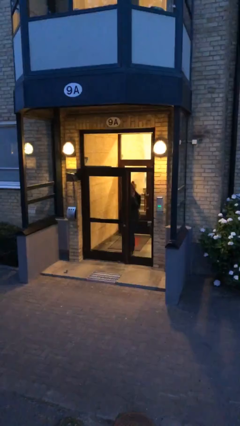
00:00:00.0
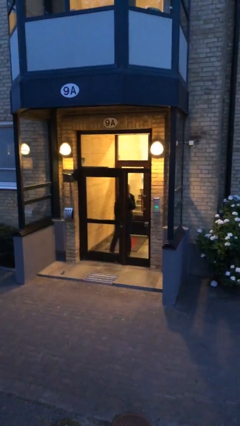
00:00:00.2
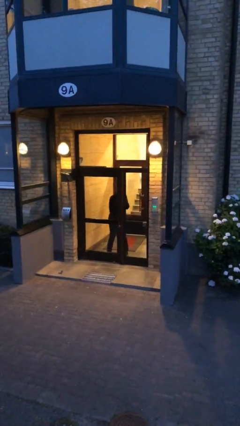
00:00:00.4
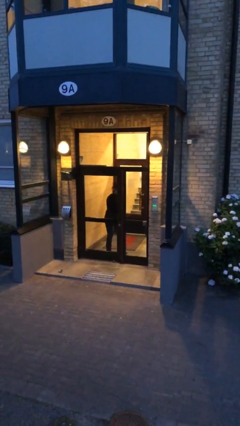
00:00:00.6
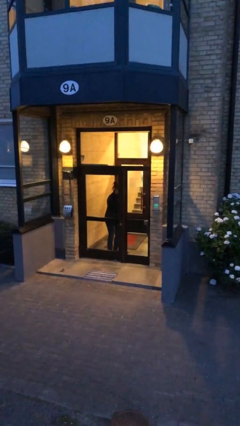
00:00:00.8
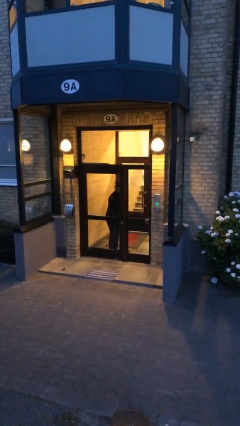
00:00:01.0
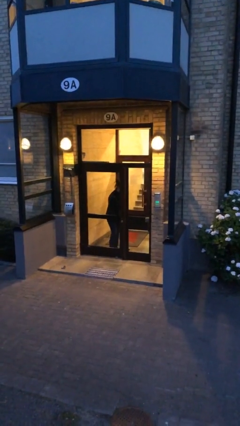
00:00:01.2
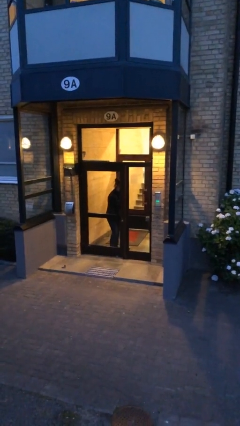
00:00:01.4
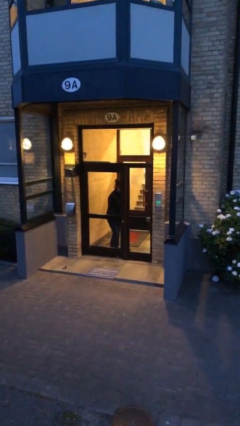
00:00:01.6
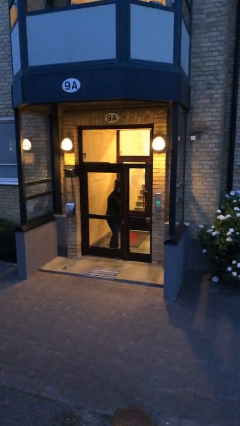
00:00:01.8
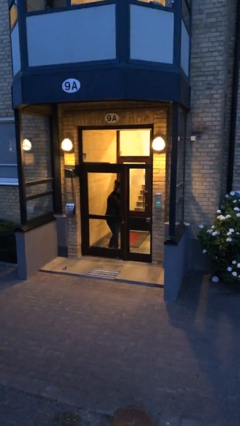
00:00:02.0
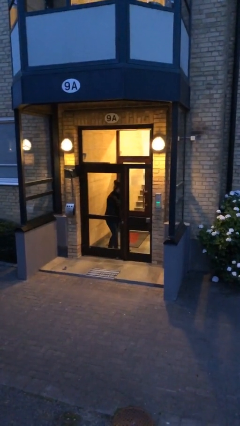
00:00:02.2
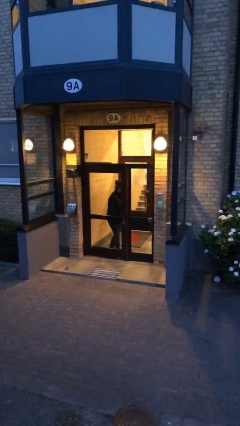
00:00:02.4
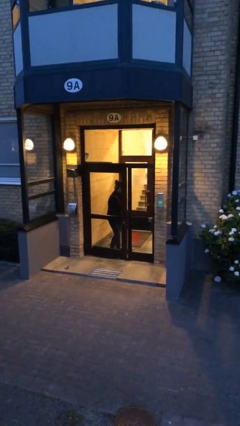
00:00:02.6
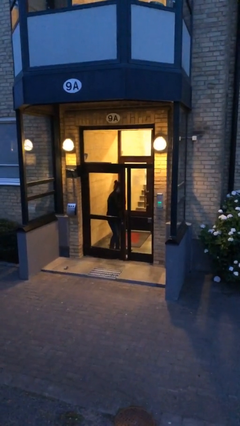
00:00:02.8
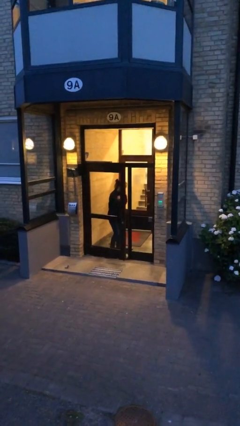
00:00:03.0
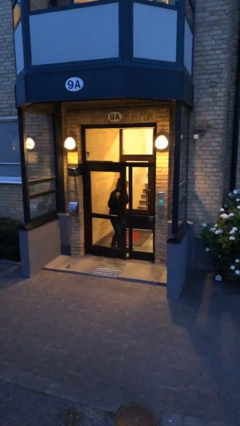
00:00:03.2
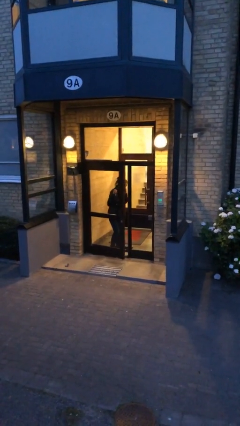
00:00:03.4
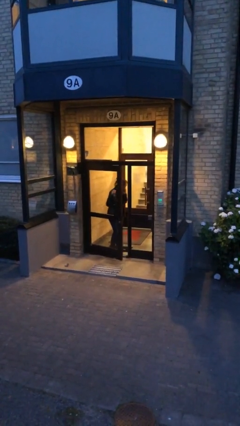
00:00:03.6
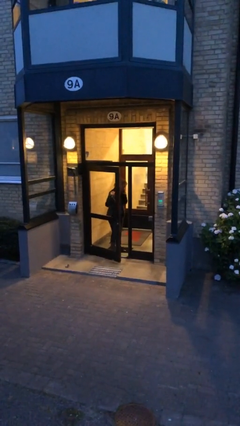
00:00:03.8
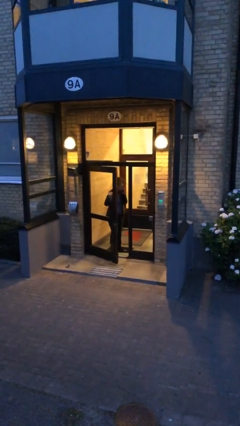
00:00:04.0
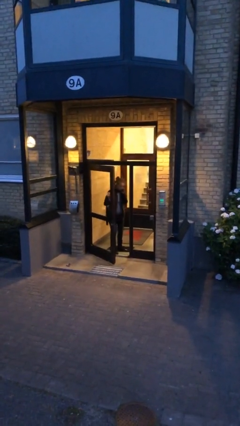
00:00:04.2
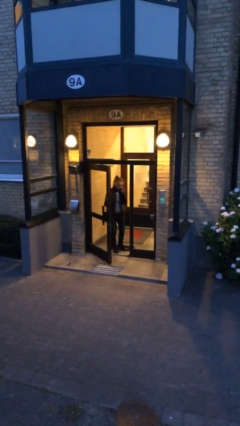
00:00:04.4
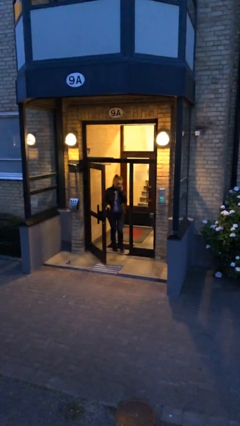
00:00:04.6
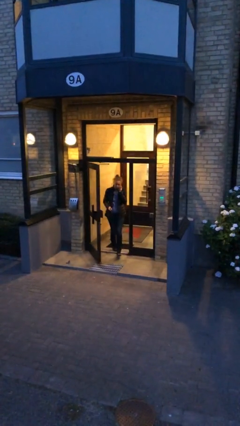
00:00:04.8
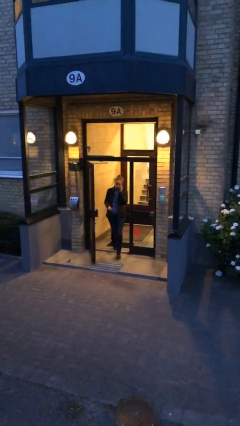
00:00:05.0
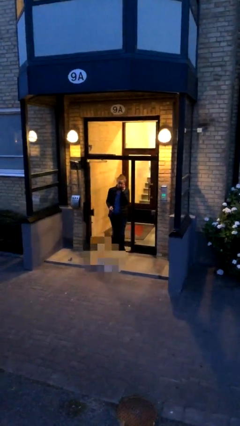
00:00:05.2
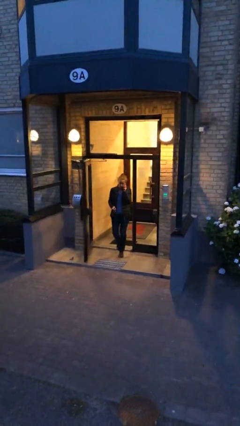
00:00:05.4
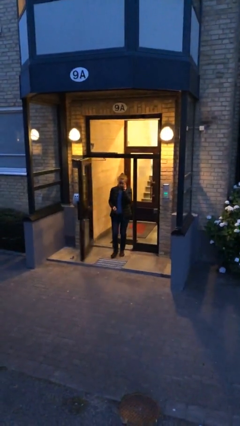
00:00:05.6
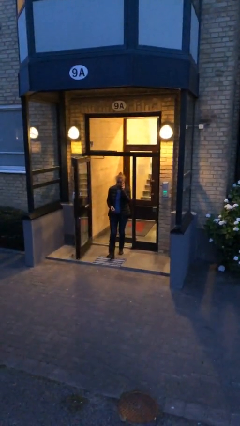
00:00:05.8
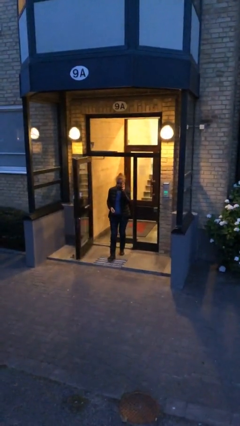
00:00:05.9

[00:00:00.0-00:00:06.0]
person opens facility door

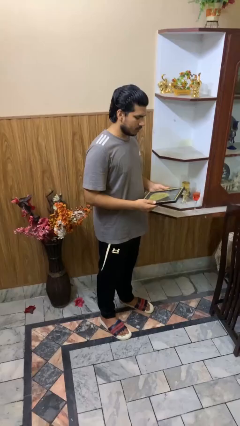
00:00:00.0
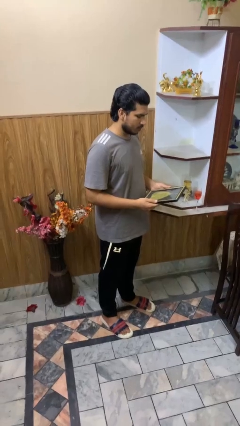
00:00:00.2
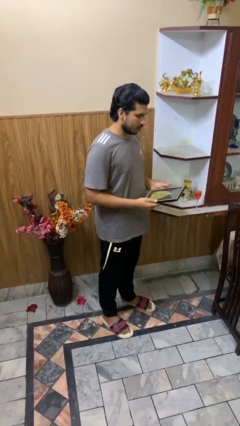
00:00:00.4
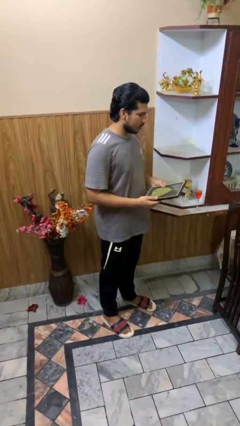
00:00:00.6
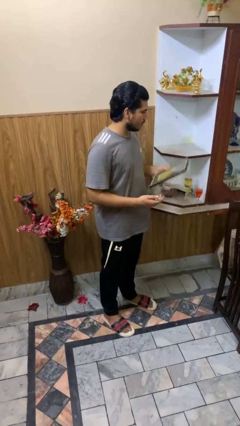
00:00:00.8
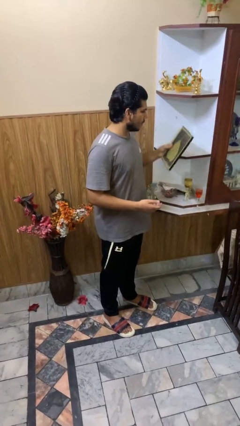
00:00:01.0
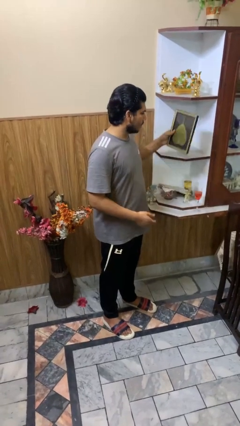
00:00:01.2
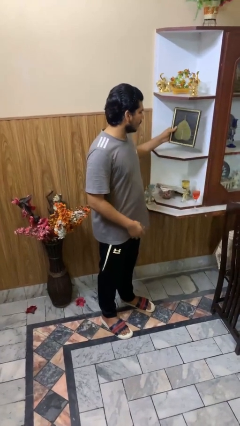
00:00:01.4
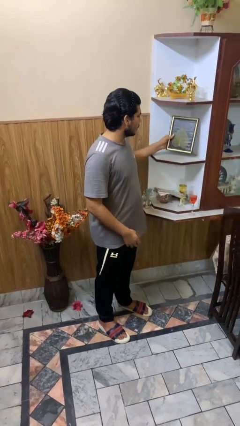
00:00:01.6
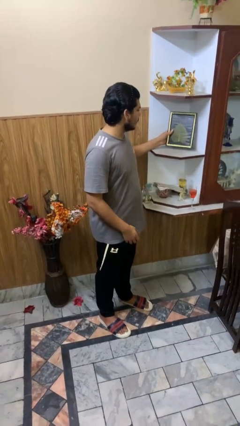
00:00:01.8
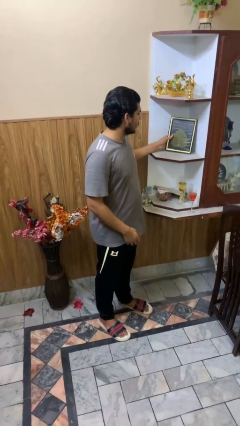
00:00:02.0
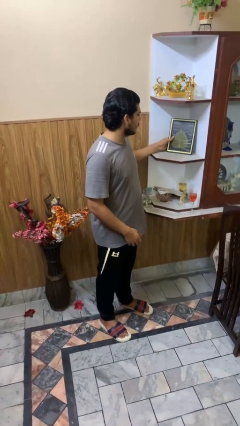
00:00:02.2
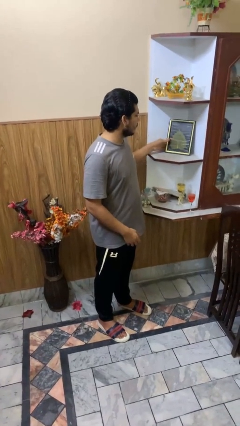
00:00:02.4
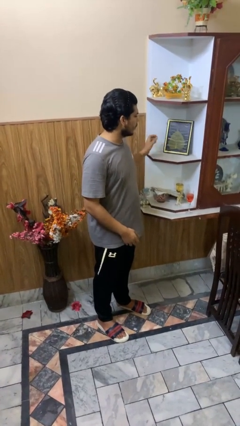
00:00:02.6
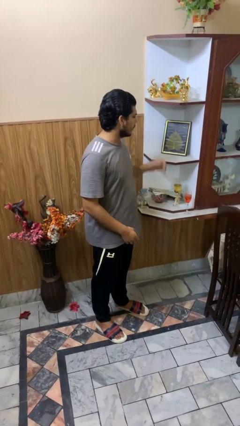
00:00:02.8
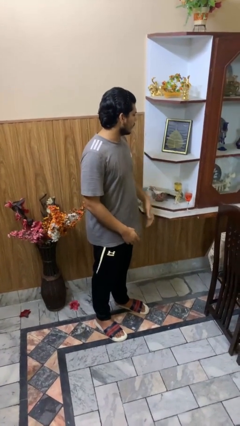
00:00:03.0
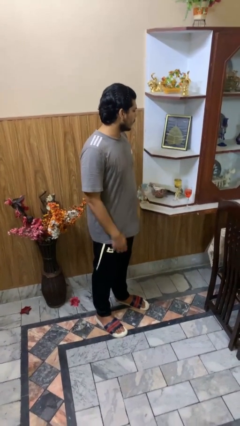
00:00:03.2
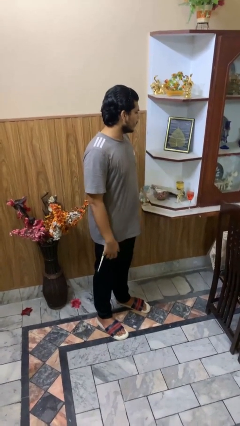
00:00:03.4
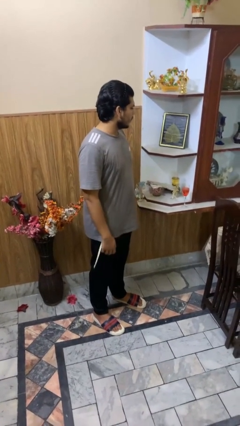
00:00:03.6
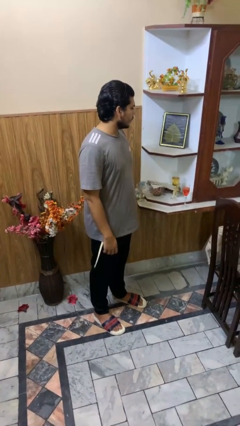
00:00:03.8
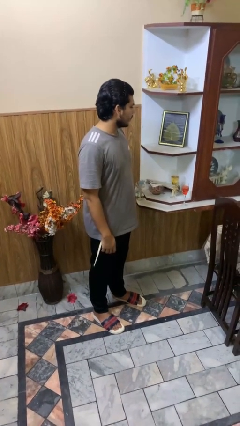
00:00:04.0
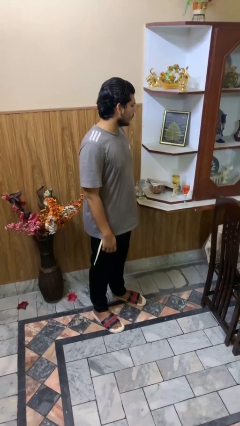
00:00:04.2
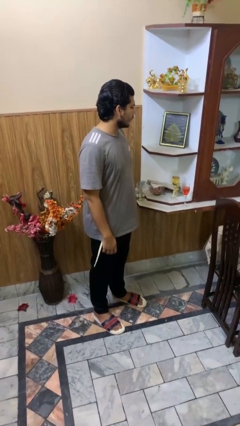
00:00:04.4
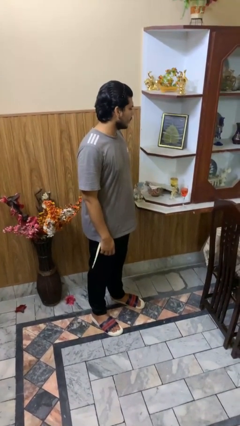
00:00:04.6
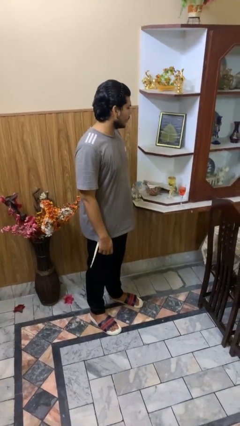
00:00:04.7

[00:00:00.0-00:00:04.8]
person puts up picture frame

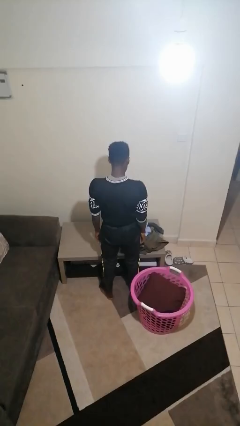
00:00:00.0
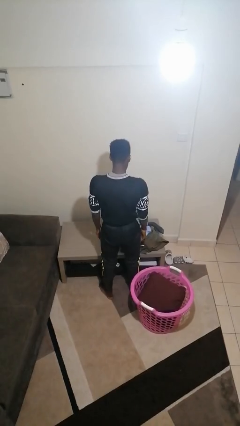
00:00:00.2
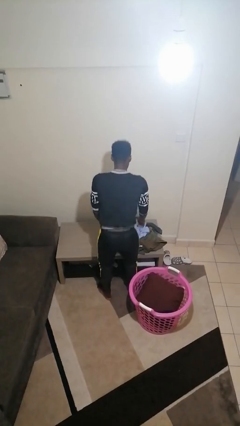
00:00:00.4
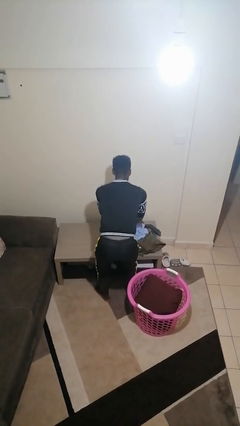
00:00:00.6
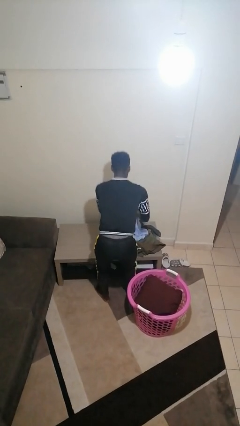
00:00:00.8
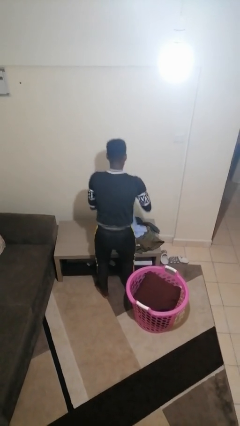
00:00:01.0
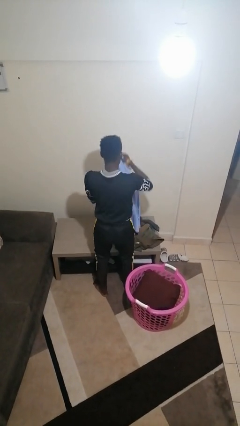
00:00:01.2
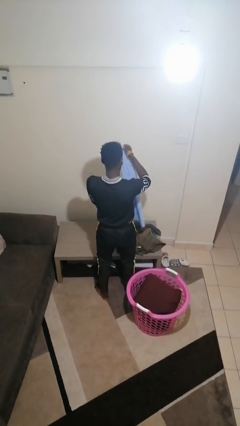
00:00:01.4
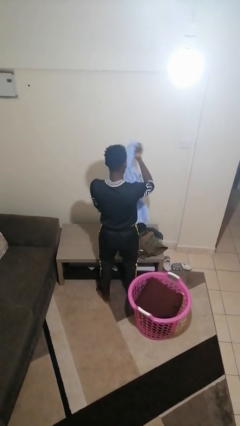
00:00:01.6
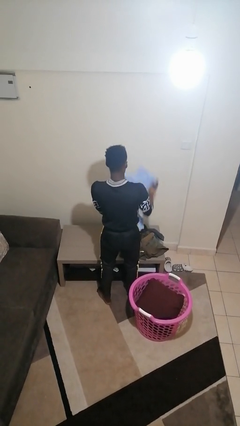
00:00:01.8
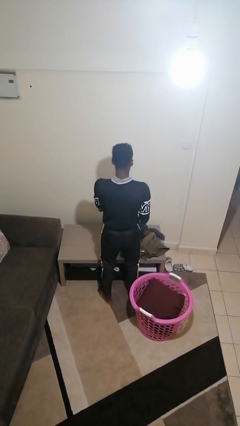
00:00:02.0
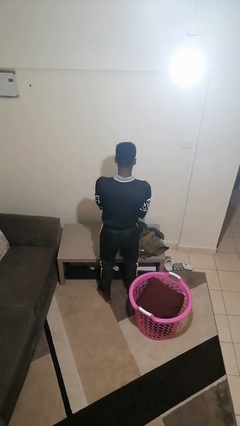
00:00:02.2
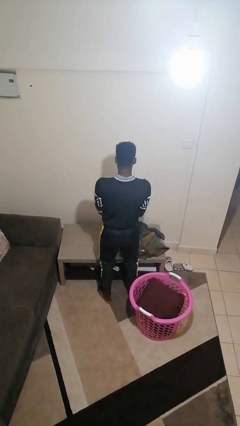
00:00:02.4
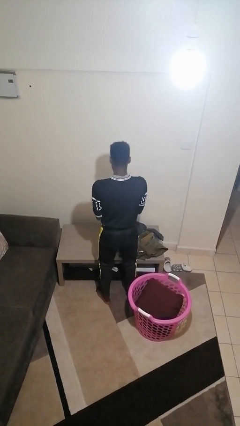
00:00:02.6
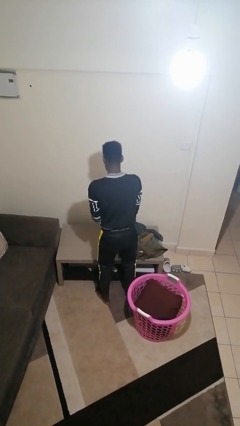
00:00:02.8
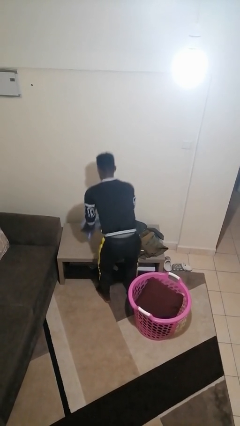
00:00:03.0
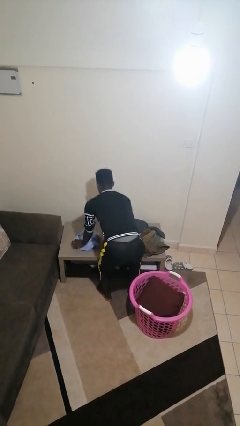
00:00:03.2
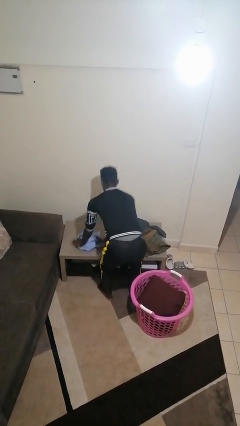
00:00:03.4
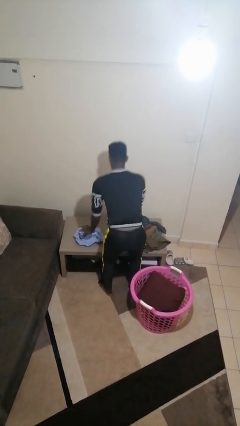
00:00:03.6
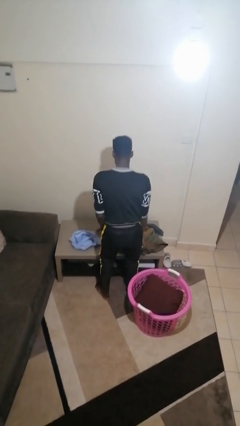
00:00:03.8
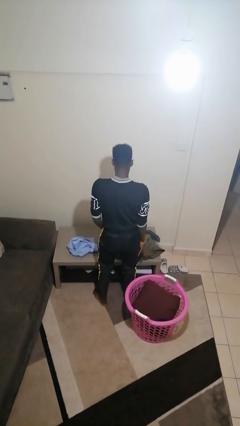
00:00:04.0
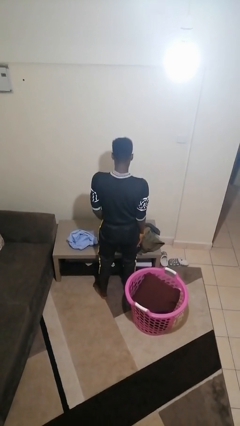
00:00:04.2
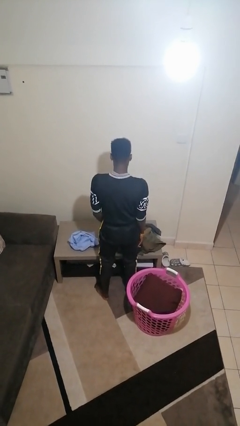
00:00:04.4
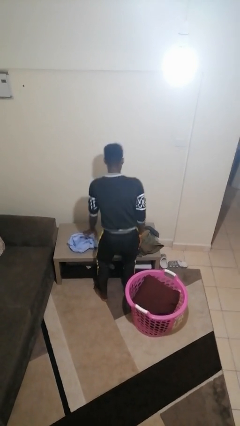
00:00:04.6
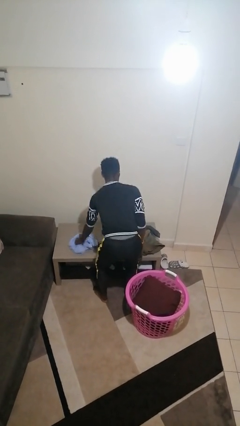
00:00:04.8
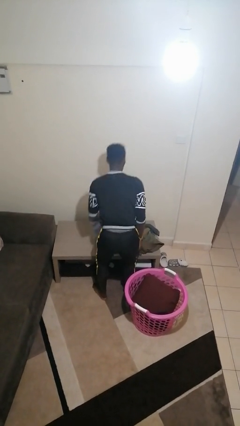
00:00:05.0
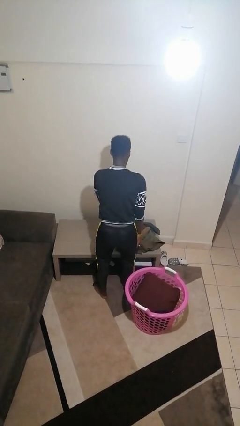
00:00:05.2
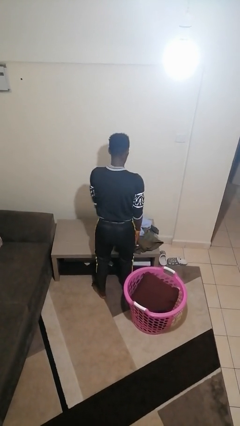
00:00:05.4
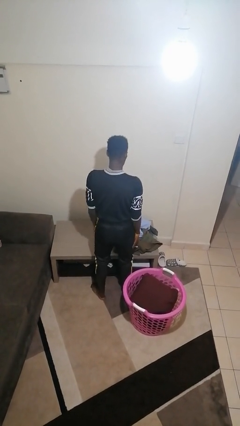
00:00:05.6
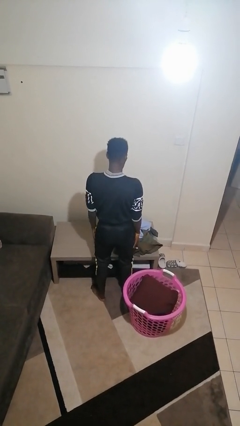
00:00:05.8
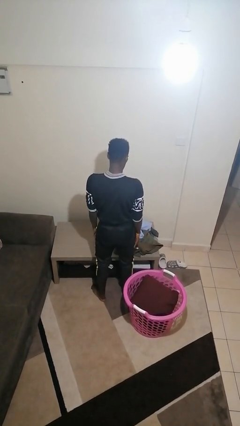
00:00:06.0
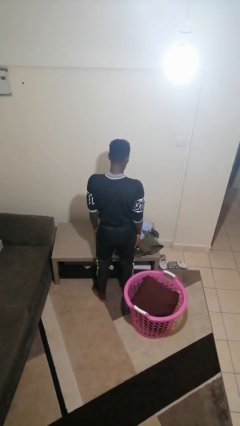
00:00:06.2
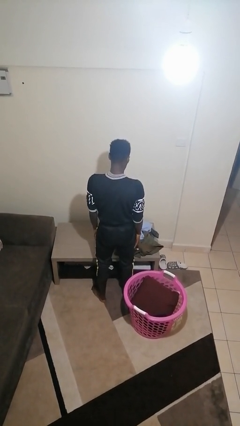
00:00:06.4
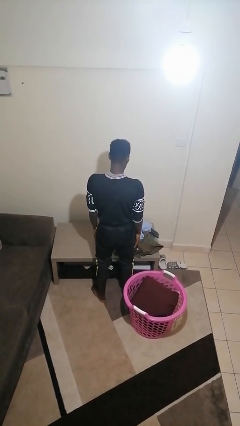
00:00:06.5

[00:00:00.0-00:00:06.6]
person folds shirt

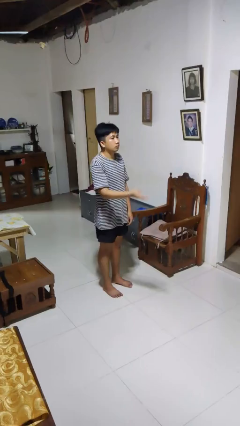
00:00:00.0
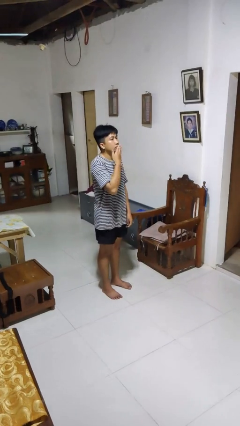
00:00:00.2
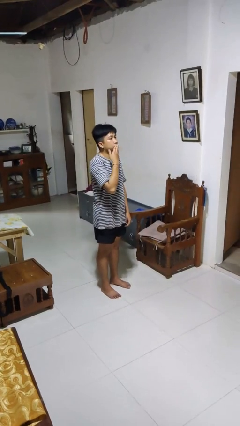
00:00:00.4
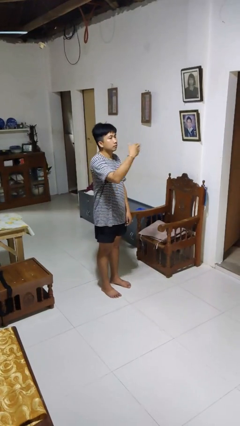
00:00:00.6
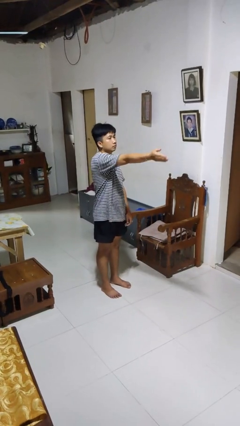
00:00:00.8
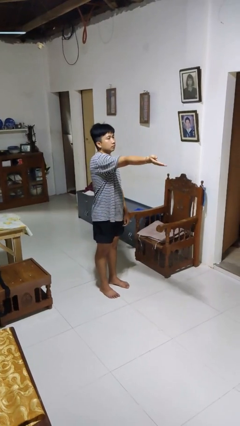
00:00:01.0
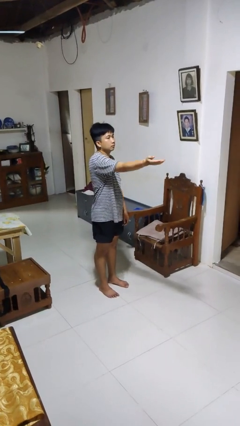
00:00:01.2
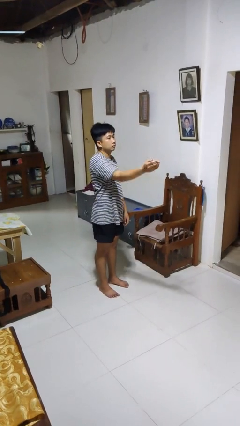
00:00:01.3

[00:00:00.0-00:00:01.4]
person gestures blow kiss
